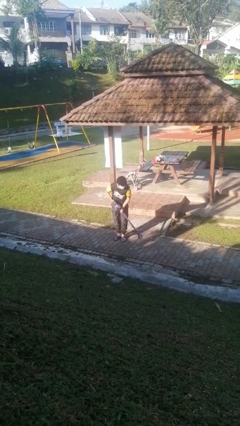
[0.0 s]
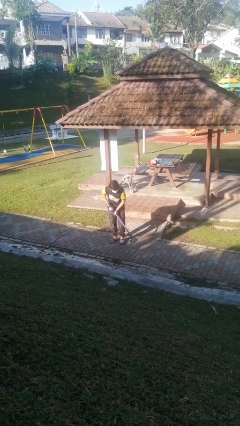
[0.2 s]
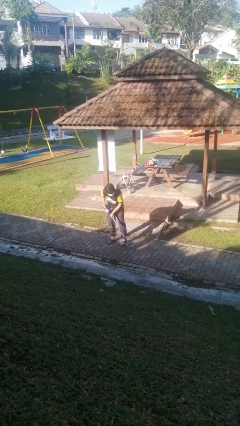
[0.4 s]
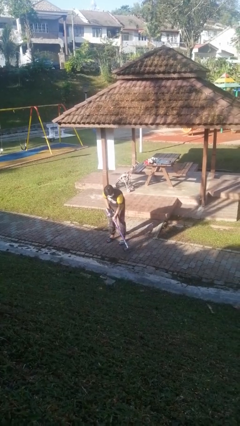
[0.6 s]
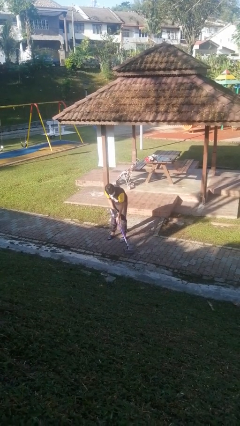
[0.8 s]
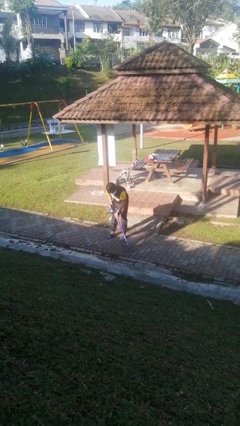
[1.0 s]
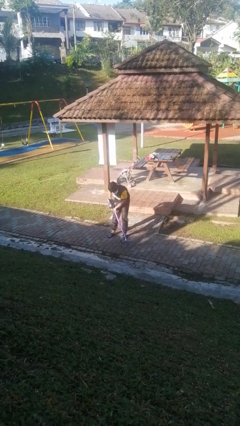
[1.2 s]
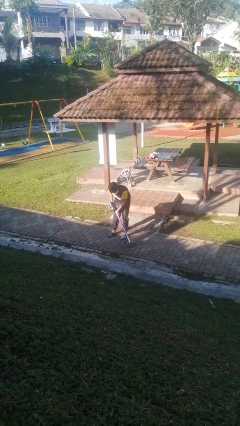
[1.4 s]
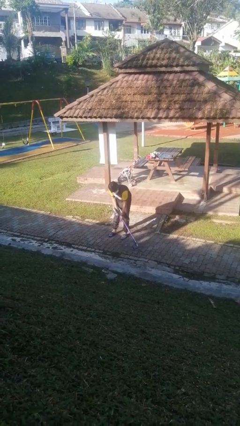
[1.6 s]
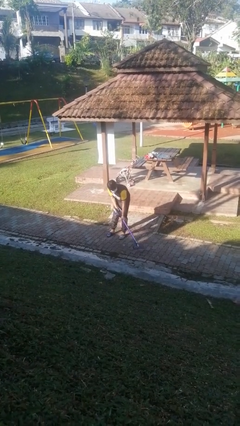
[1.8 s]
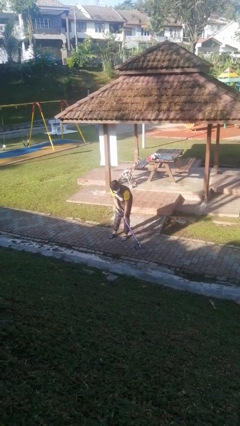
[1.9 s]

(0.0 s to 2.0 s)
person vacuums carpet

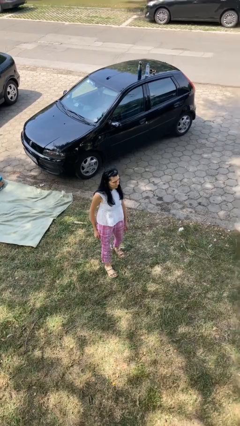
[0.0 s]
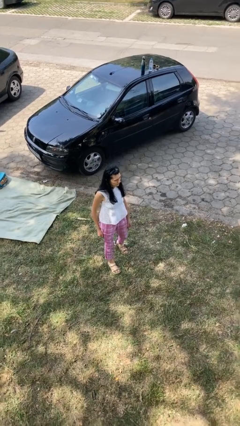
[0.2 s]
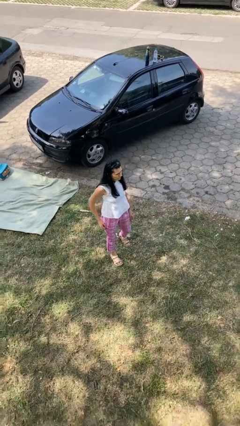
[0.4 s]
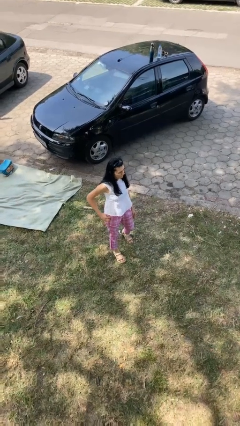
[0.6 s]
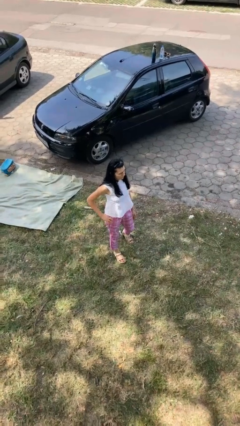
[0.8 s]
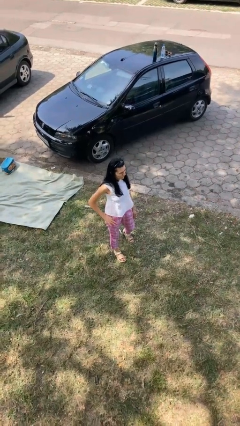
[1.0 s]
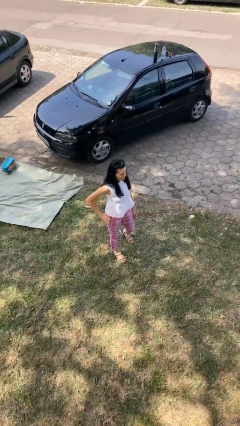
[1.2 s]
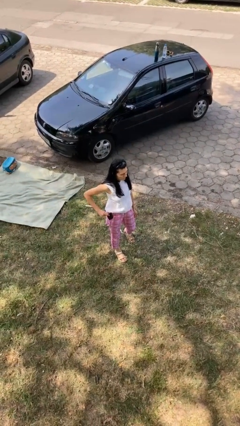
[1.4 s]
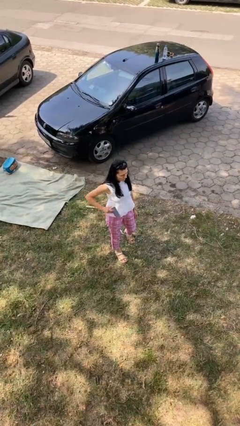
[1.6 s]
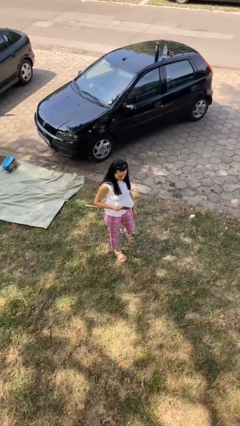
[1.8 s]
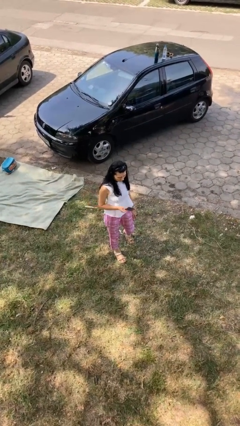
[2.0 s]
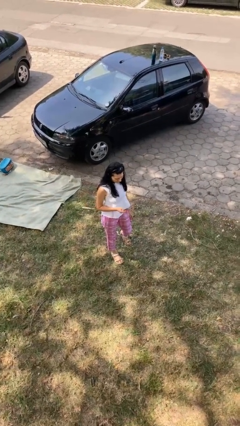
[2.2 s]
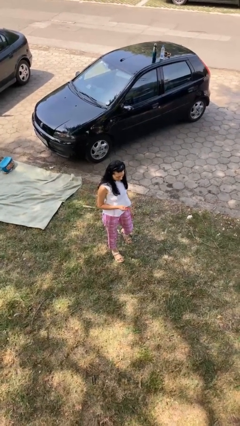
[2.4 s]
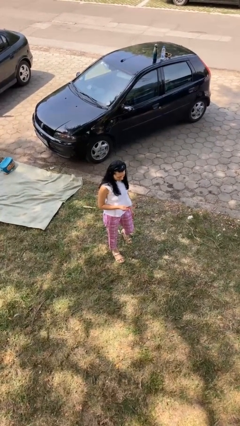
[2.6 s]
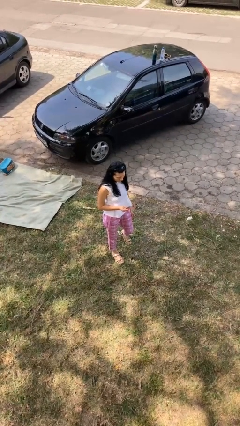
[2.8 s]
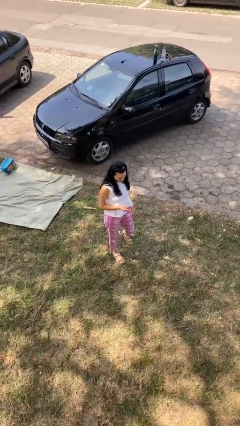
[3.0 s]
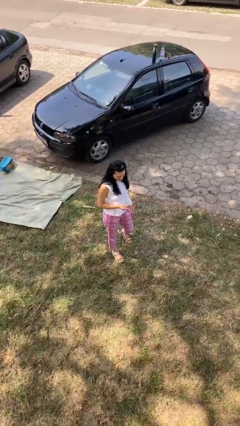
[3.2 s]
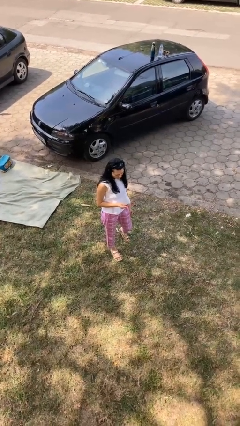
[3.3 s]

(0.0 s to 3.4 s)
person takes phone from pocket

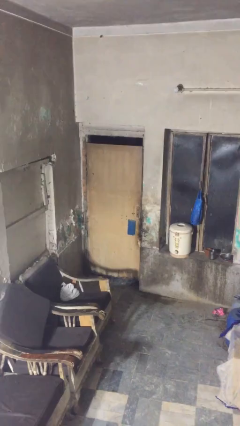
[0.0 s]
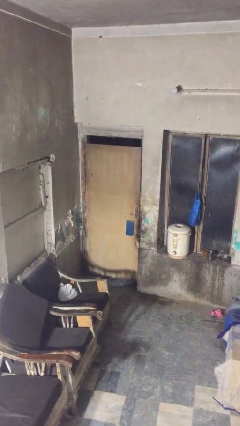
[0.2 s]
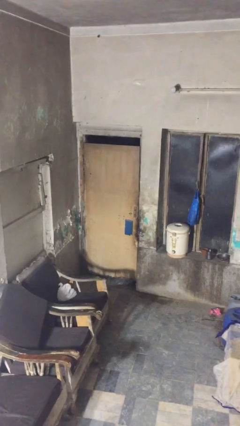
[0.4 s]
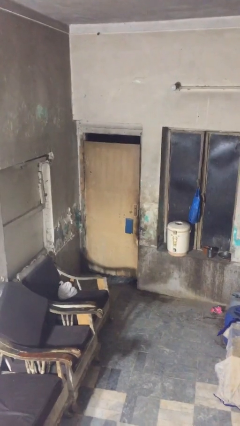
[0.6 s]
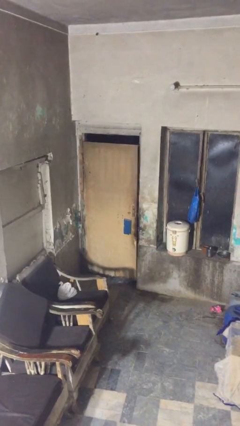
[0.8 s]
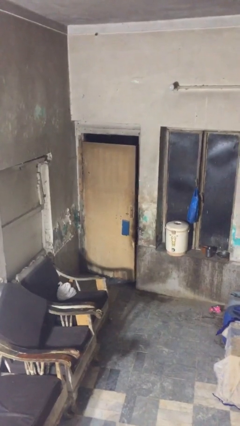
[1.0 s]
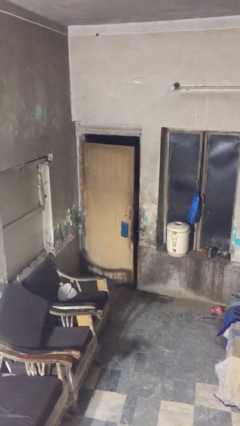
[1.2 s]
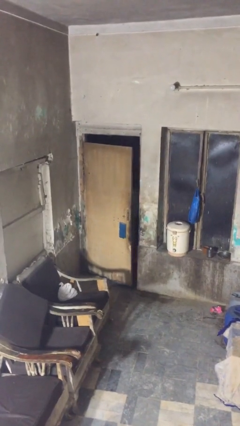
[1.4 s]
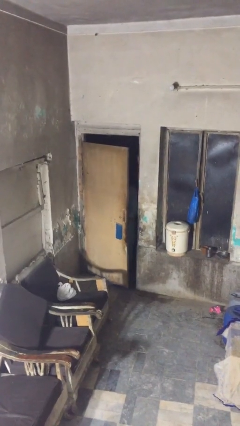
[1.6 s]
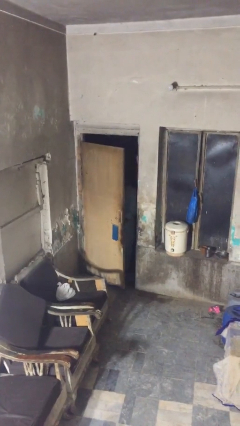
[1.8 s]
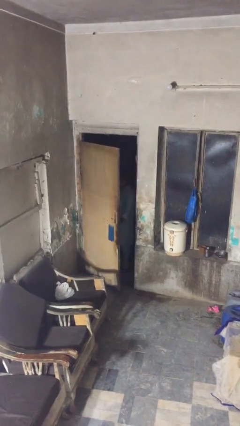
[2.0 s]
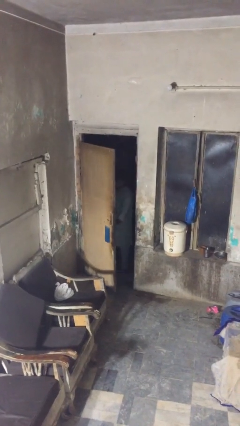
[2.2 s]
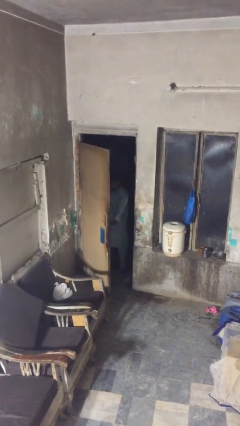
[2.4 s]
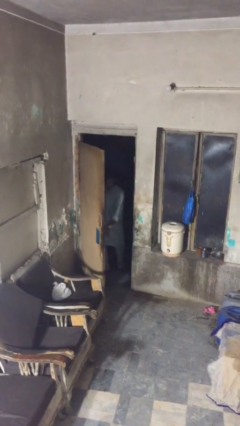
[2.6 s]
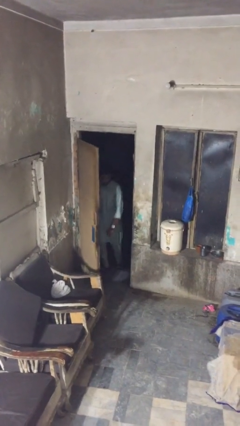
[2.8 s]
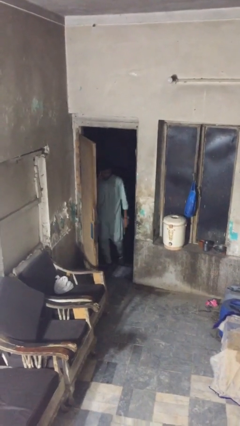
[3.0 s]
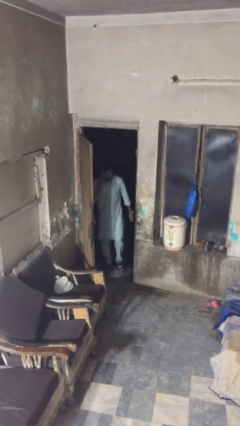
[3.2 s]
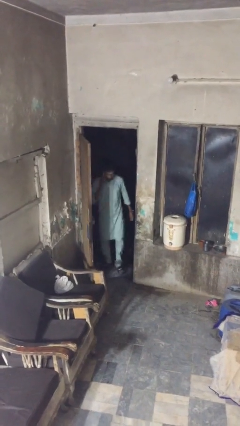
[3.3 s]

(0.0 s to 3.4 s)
person opens facility door

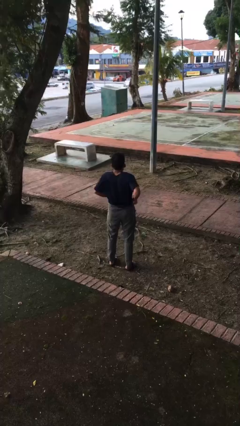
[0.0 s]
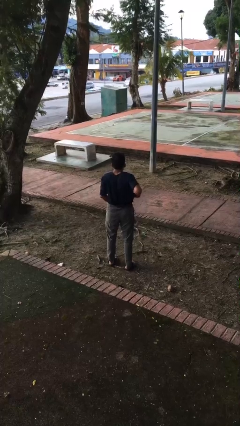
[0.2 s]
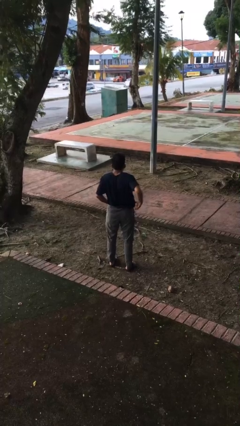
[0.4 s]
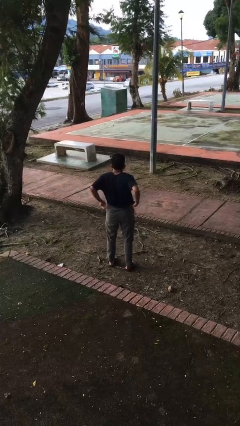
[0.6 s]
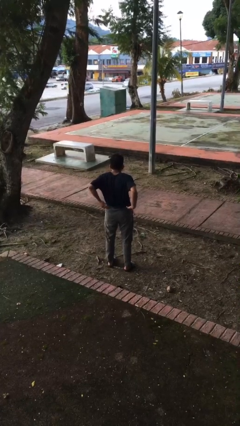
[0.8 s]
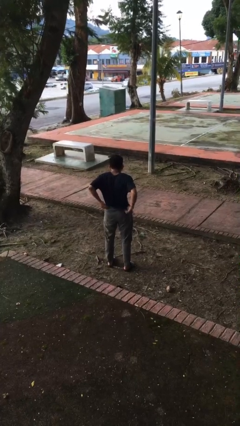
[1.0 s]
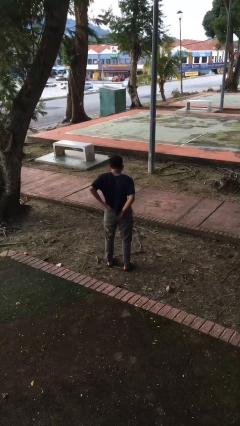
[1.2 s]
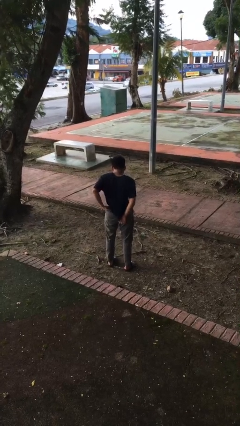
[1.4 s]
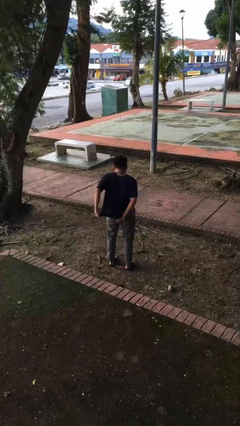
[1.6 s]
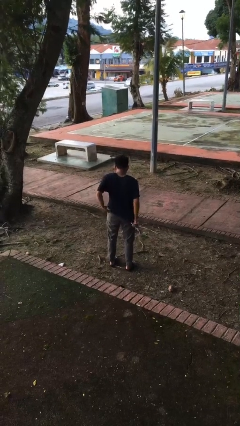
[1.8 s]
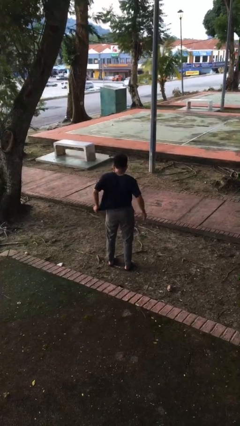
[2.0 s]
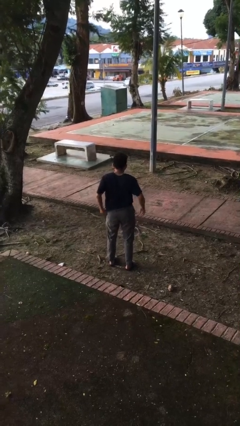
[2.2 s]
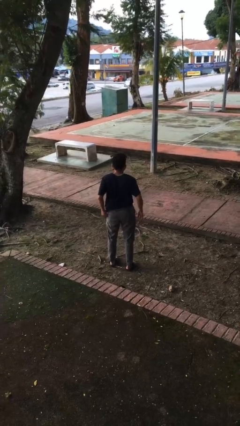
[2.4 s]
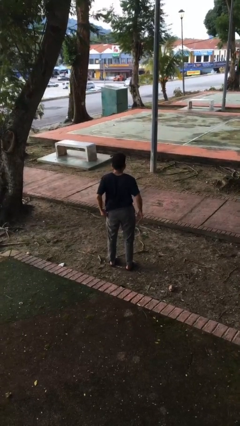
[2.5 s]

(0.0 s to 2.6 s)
person untucks shirt

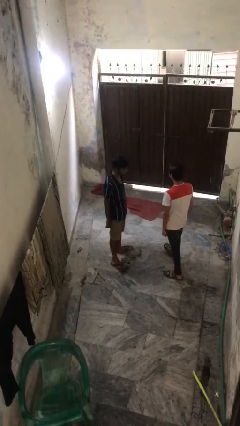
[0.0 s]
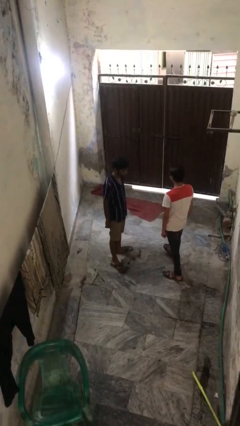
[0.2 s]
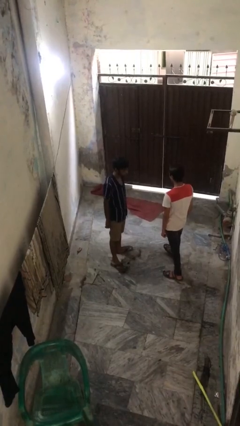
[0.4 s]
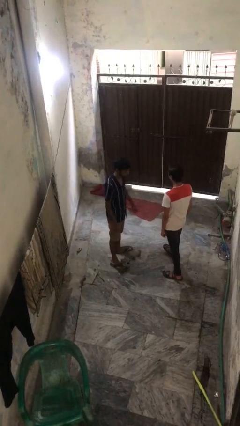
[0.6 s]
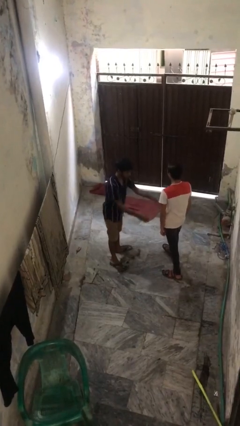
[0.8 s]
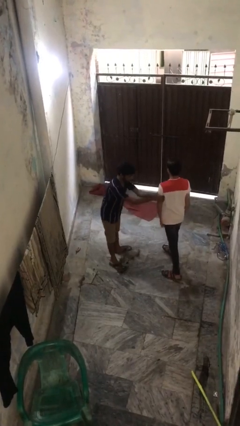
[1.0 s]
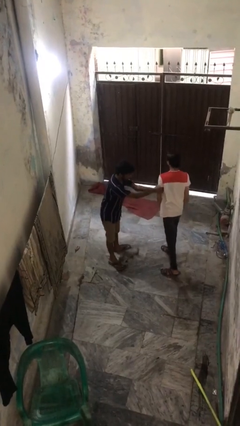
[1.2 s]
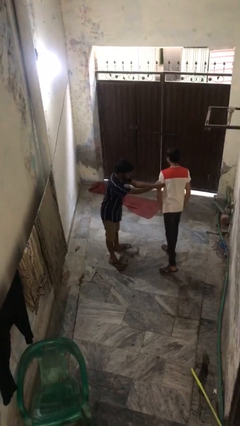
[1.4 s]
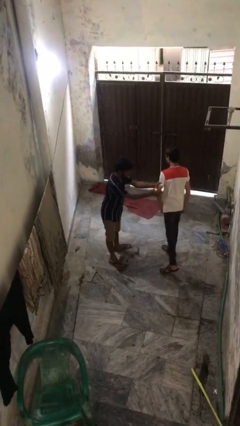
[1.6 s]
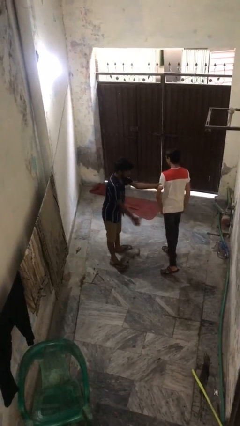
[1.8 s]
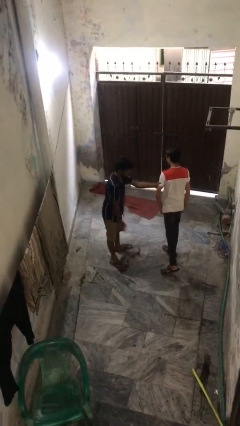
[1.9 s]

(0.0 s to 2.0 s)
person grabs person by bicep

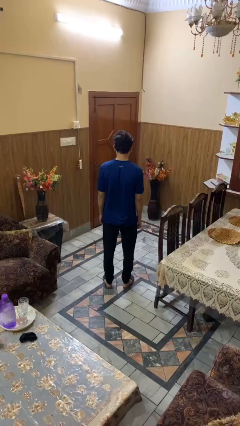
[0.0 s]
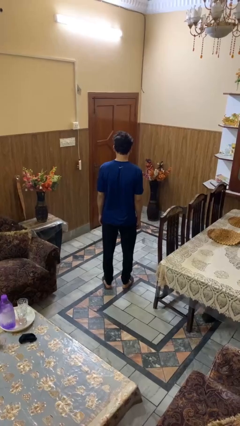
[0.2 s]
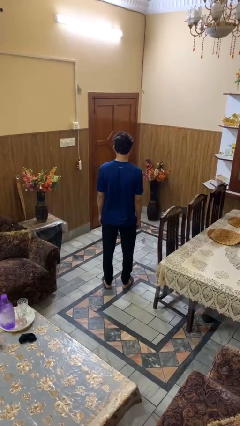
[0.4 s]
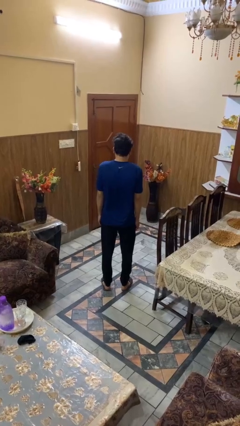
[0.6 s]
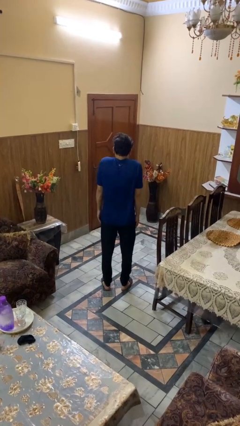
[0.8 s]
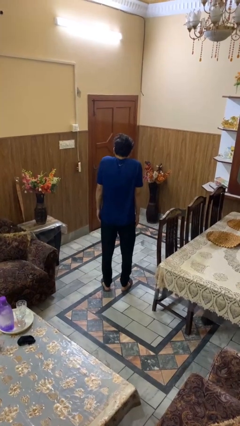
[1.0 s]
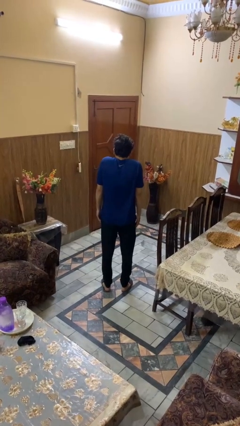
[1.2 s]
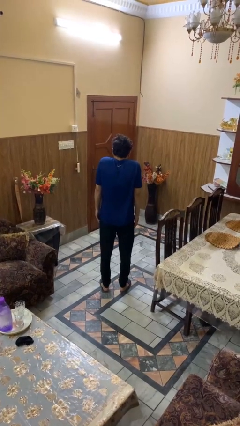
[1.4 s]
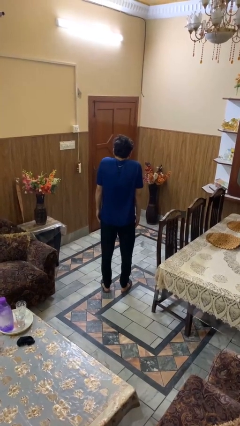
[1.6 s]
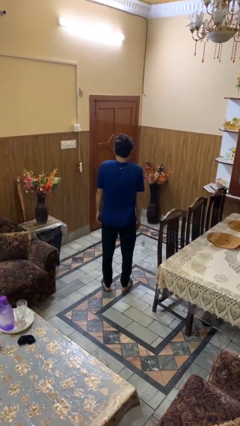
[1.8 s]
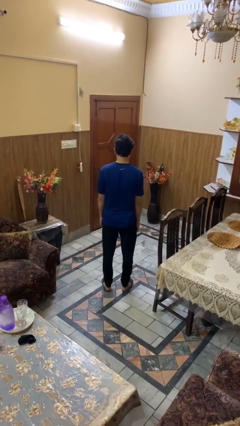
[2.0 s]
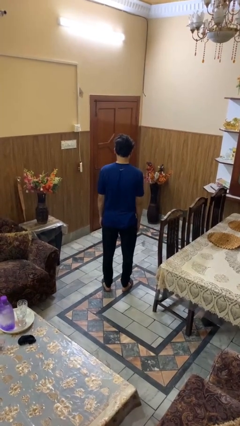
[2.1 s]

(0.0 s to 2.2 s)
person shrugs

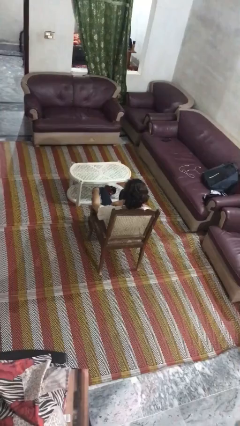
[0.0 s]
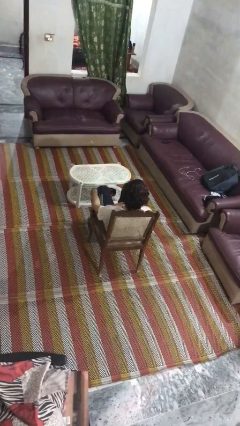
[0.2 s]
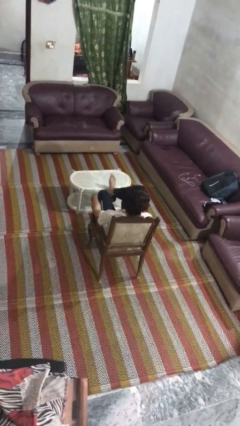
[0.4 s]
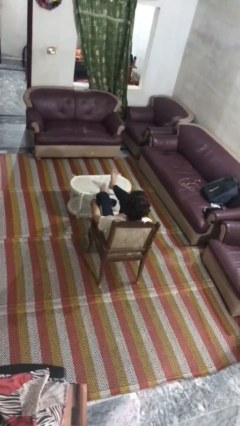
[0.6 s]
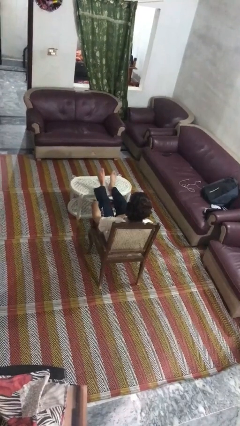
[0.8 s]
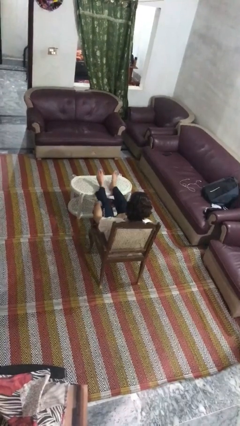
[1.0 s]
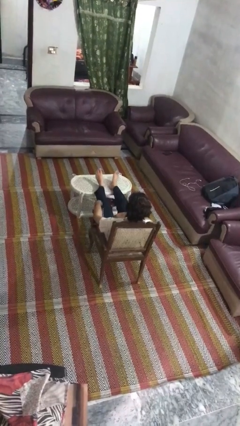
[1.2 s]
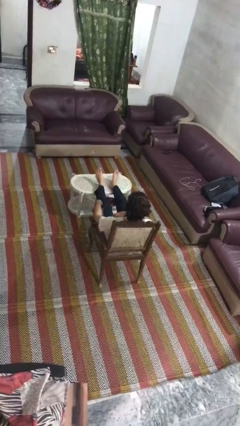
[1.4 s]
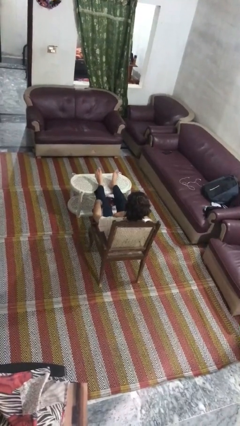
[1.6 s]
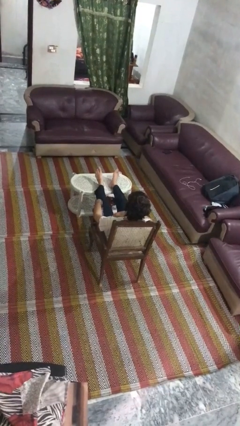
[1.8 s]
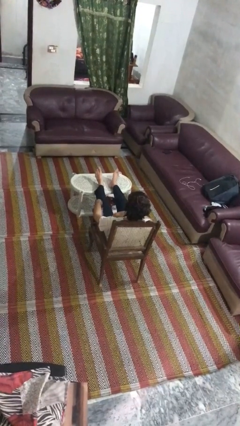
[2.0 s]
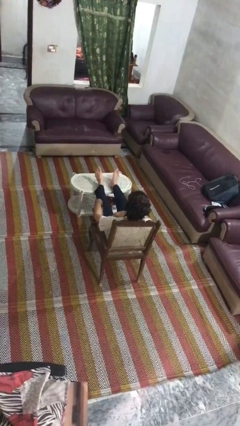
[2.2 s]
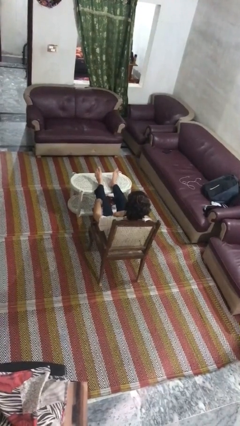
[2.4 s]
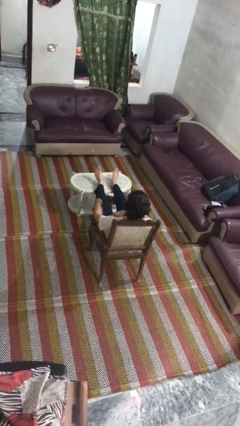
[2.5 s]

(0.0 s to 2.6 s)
person puts feet up
